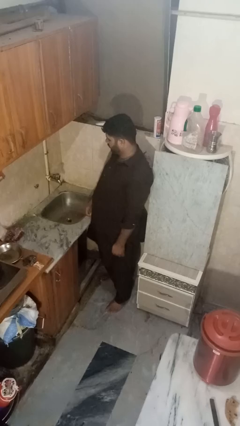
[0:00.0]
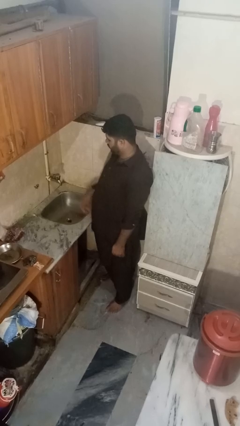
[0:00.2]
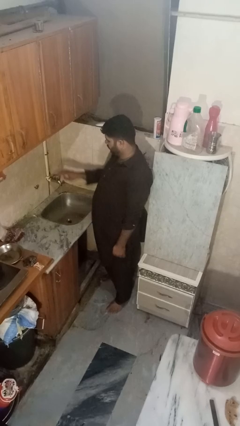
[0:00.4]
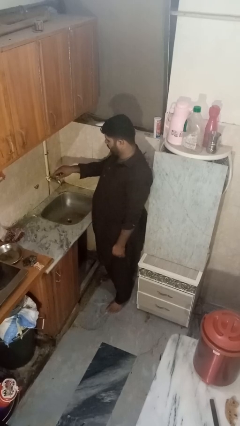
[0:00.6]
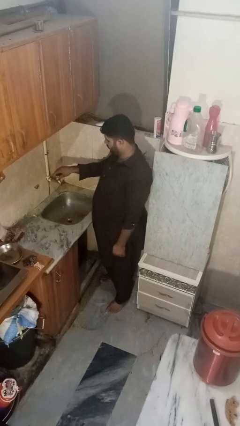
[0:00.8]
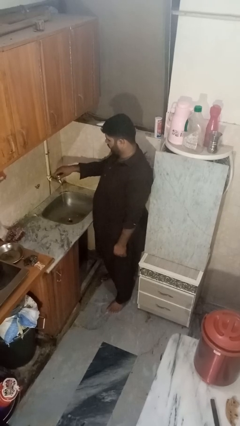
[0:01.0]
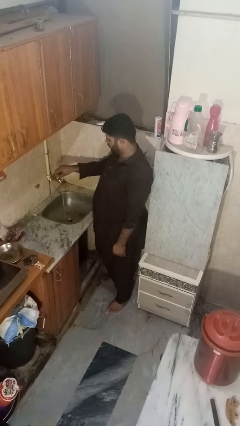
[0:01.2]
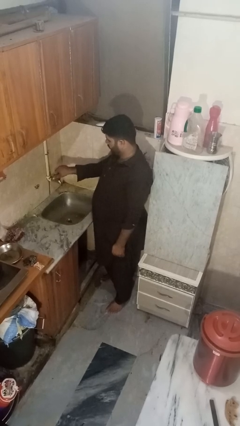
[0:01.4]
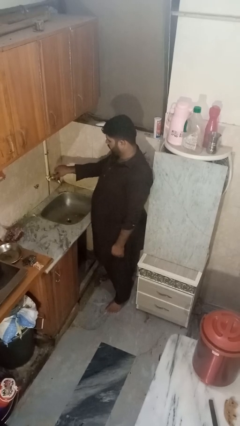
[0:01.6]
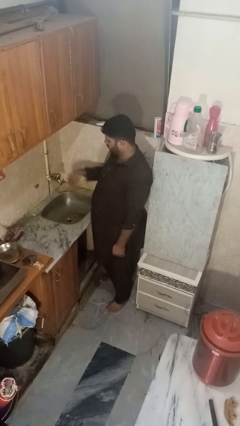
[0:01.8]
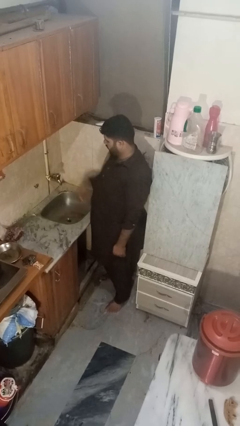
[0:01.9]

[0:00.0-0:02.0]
person turns off faucet

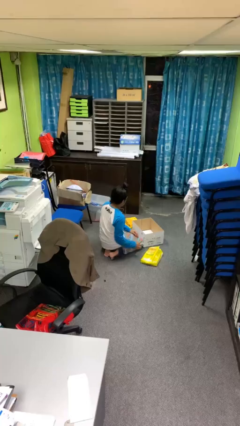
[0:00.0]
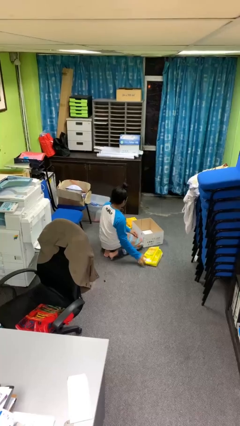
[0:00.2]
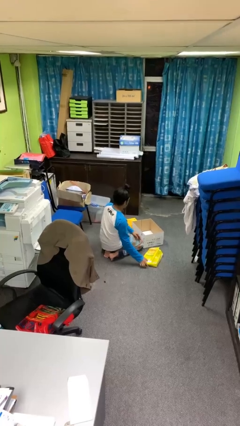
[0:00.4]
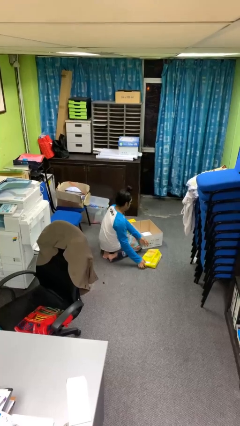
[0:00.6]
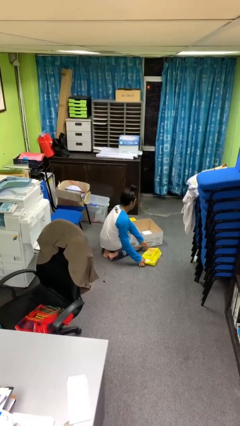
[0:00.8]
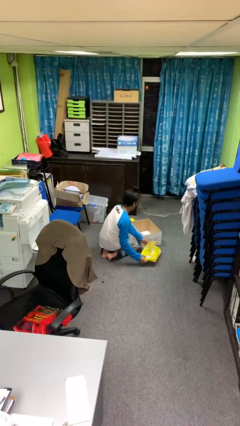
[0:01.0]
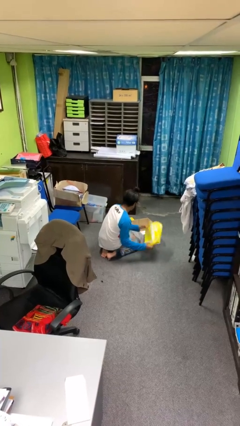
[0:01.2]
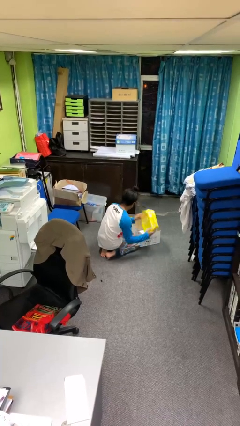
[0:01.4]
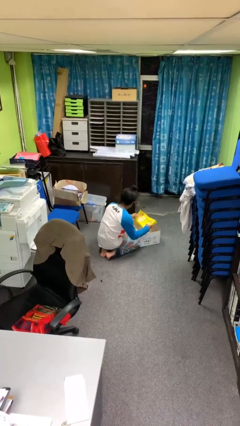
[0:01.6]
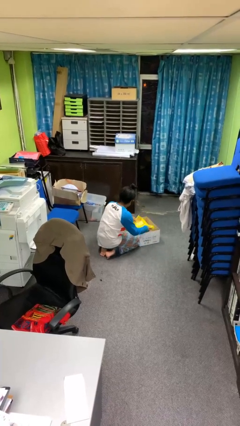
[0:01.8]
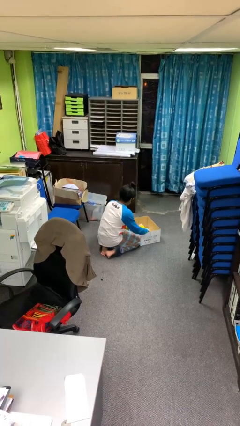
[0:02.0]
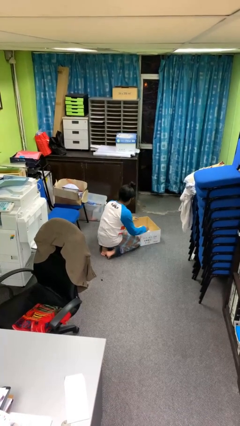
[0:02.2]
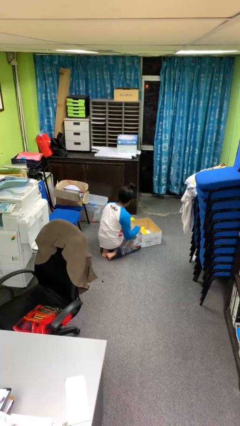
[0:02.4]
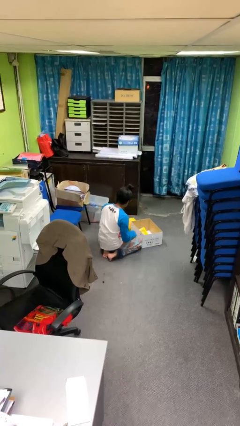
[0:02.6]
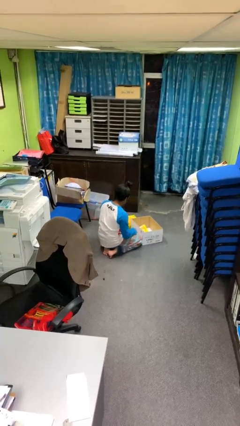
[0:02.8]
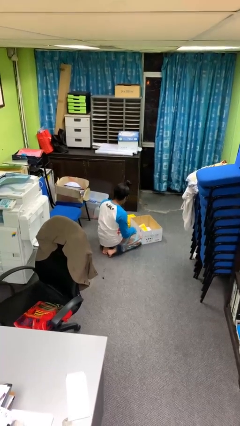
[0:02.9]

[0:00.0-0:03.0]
person puts object into box

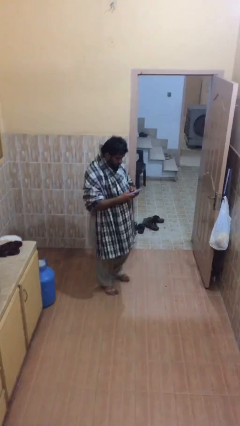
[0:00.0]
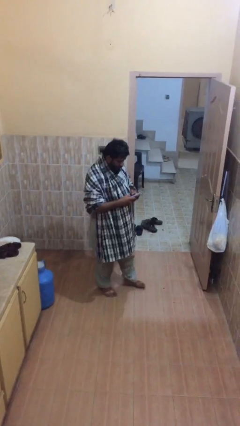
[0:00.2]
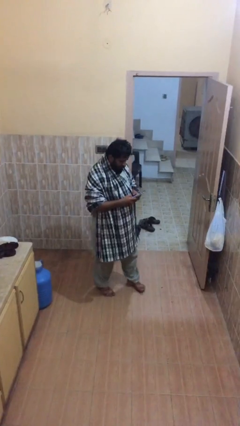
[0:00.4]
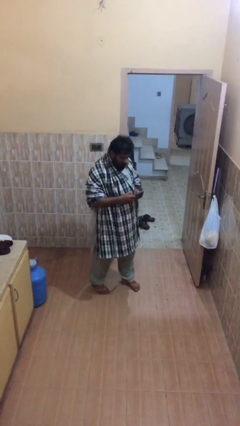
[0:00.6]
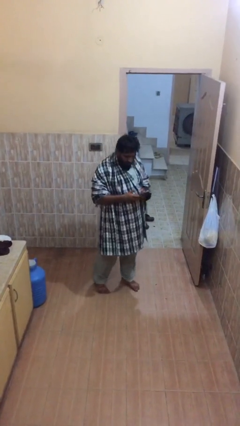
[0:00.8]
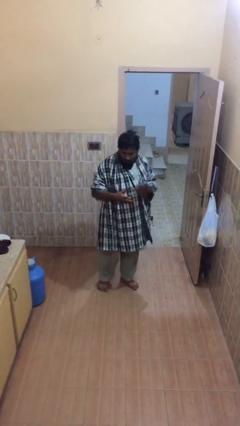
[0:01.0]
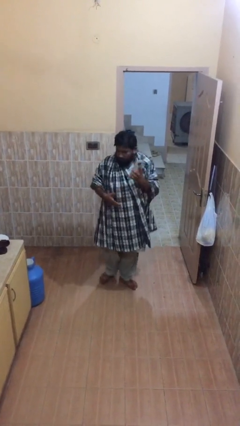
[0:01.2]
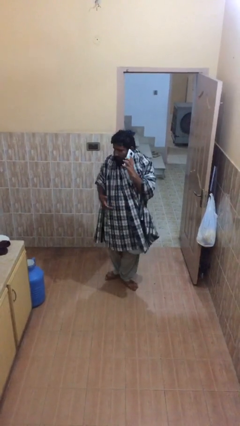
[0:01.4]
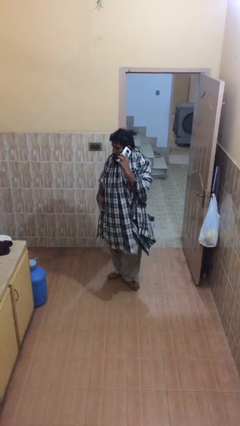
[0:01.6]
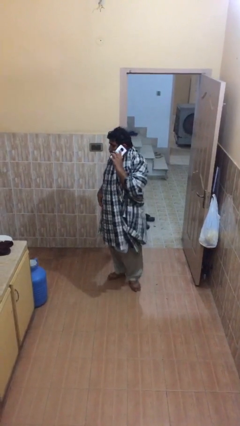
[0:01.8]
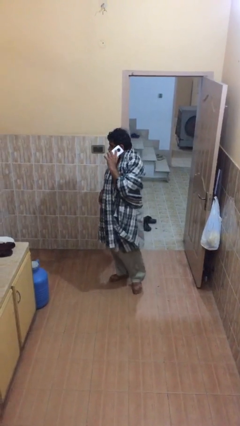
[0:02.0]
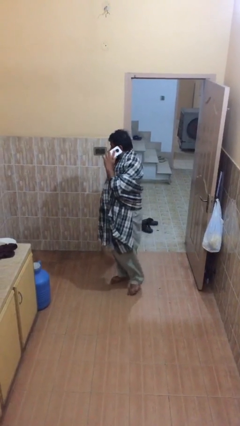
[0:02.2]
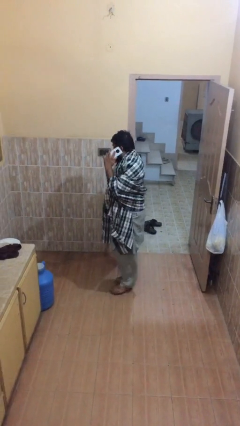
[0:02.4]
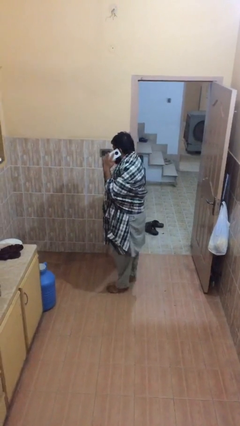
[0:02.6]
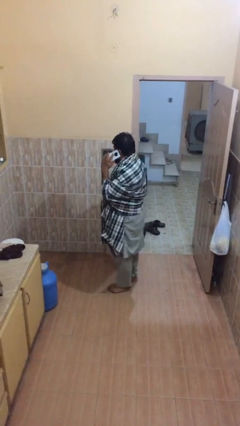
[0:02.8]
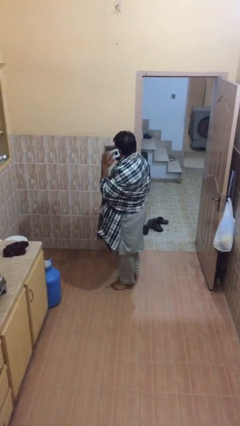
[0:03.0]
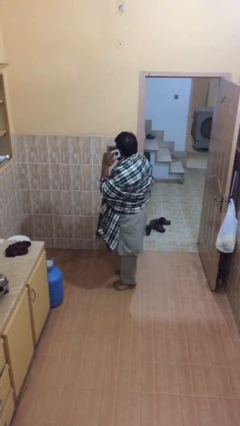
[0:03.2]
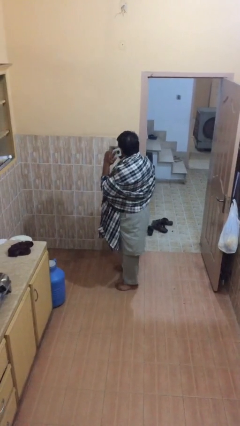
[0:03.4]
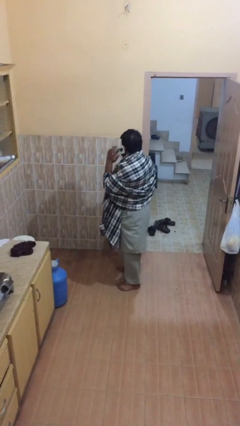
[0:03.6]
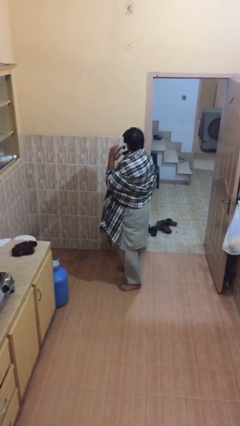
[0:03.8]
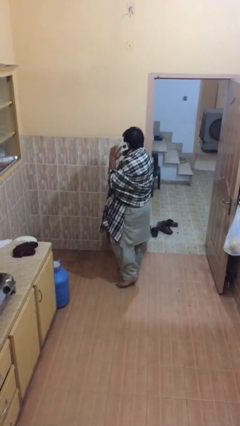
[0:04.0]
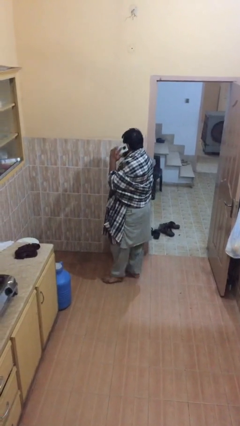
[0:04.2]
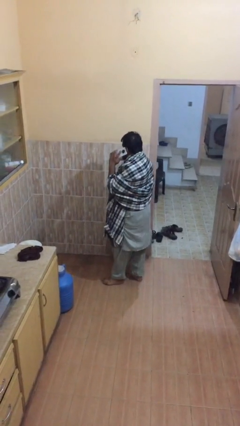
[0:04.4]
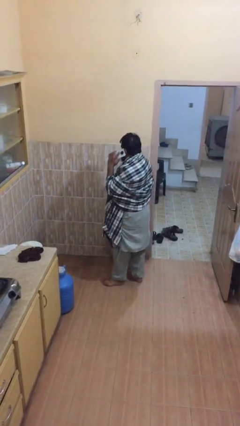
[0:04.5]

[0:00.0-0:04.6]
person talks on phone

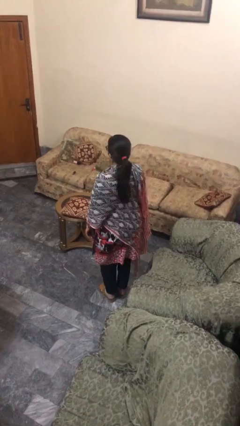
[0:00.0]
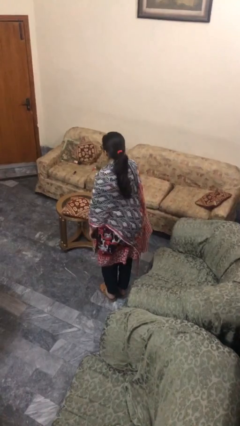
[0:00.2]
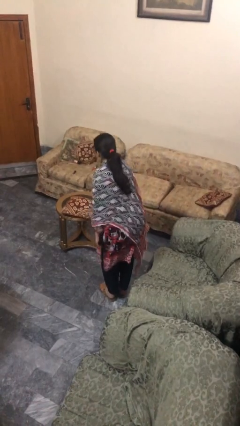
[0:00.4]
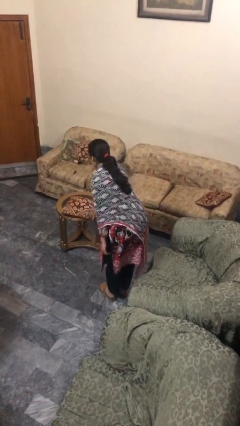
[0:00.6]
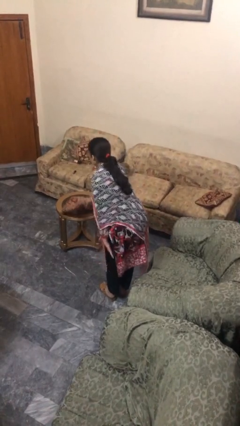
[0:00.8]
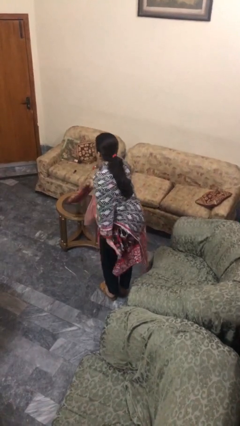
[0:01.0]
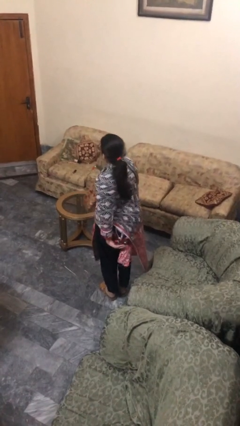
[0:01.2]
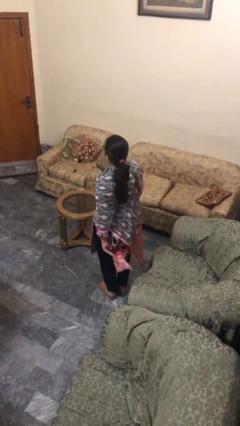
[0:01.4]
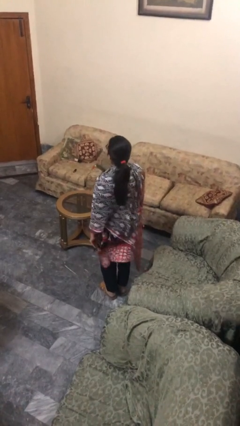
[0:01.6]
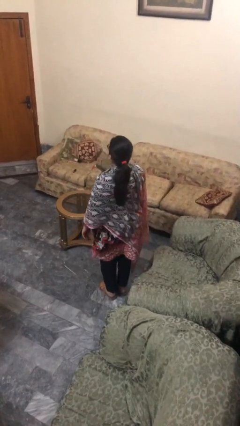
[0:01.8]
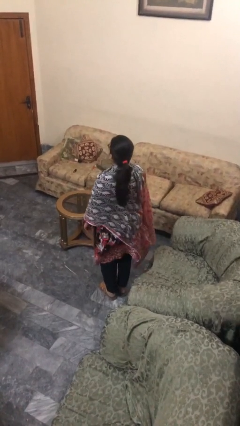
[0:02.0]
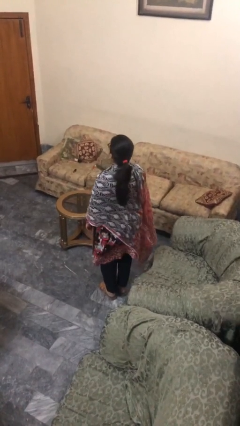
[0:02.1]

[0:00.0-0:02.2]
person picks up object from table

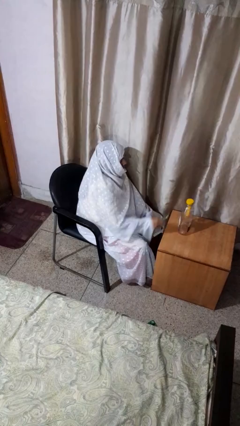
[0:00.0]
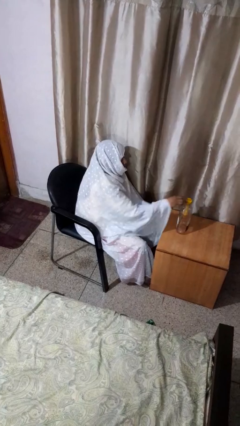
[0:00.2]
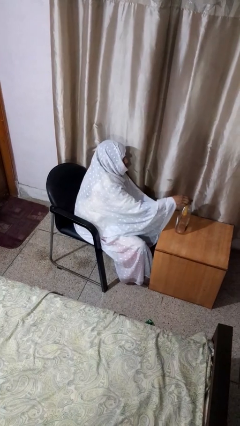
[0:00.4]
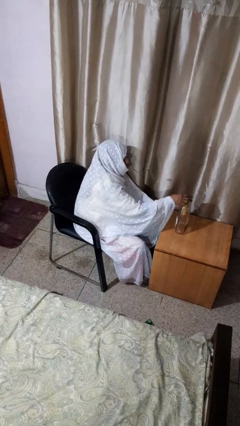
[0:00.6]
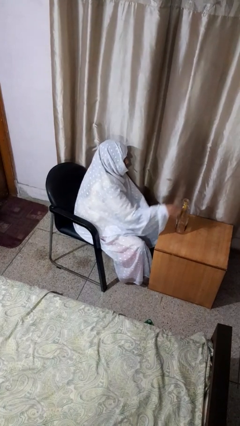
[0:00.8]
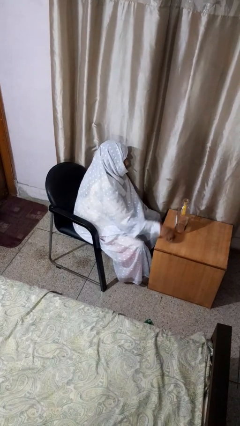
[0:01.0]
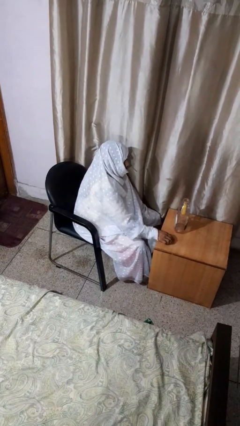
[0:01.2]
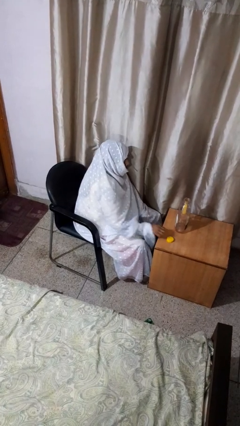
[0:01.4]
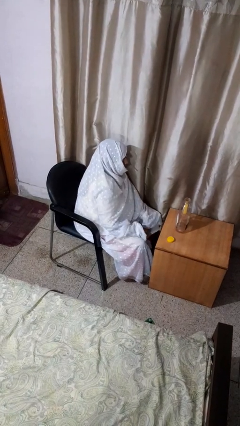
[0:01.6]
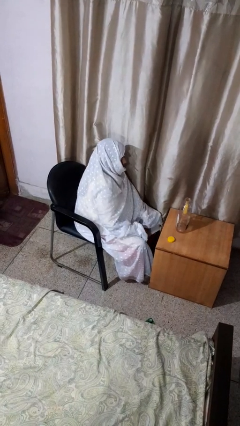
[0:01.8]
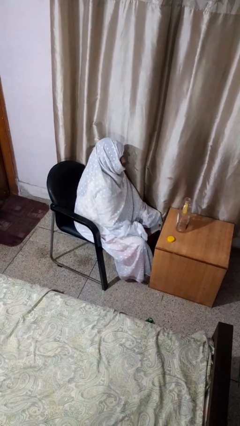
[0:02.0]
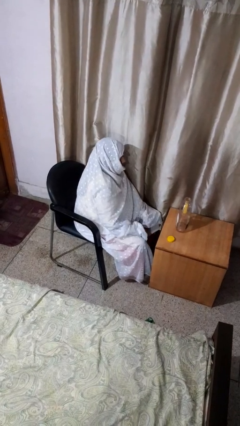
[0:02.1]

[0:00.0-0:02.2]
person unscrews lid from bottle

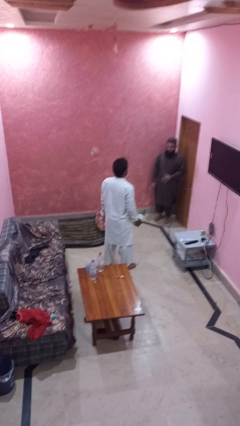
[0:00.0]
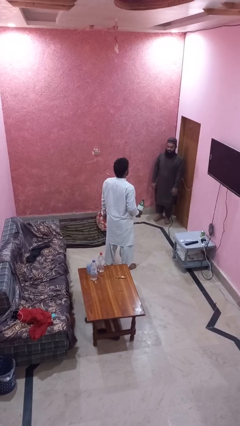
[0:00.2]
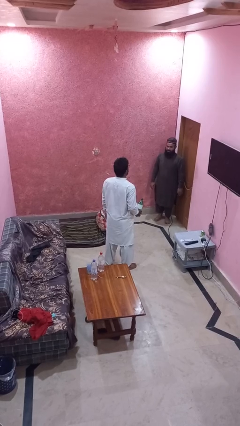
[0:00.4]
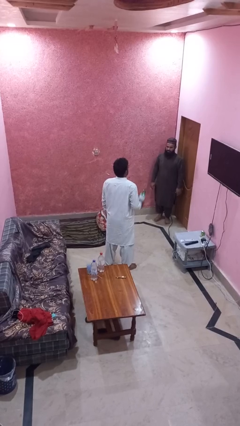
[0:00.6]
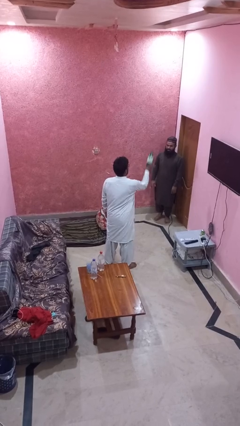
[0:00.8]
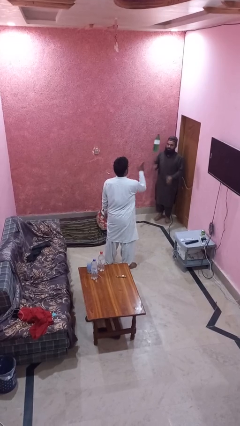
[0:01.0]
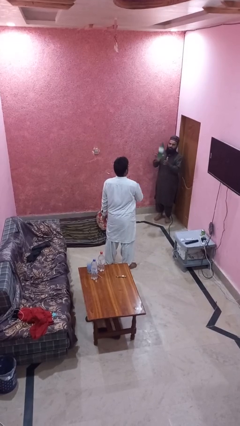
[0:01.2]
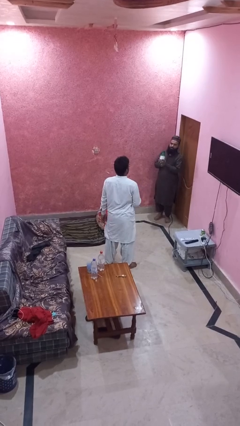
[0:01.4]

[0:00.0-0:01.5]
person throws object to person

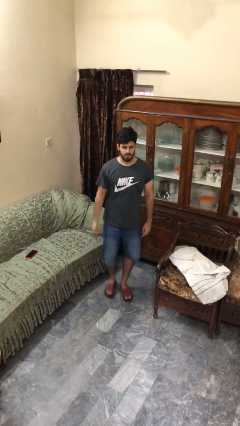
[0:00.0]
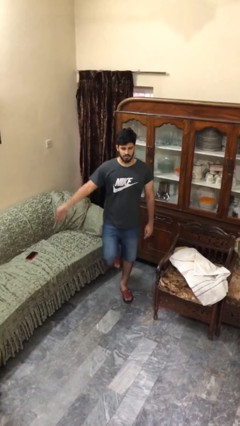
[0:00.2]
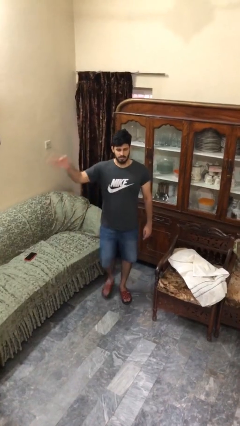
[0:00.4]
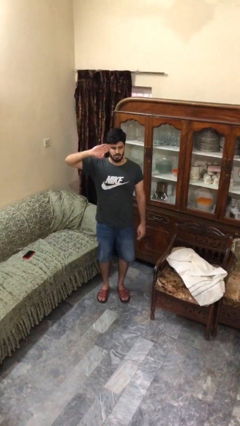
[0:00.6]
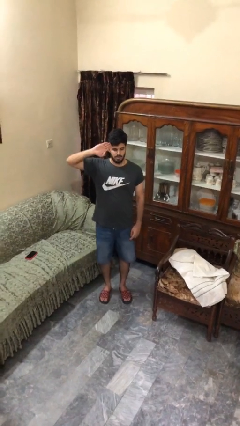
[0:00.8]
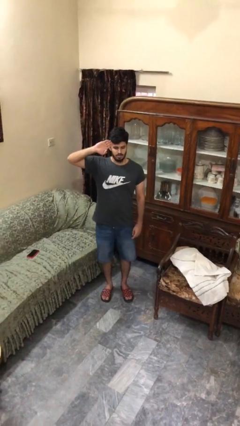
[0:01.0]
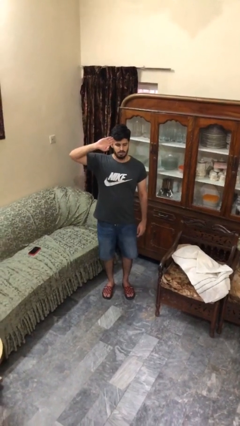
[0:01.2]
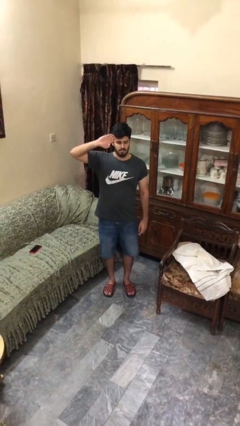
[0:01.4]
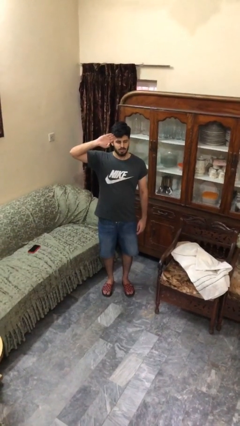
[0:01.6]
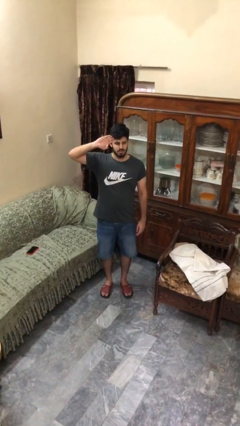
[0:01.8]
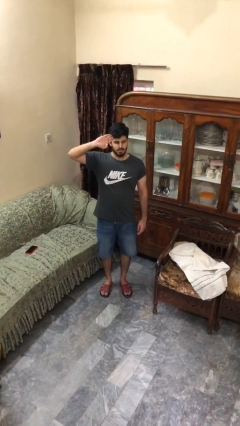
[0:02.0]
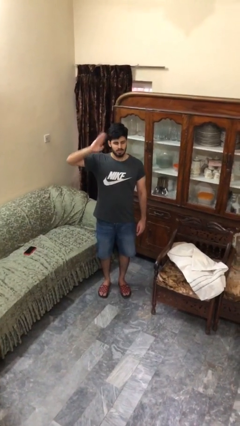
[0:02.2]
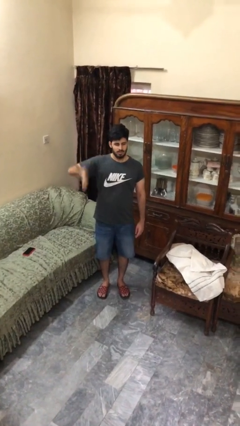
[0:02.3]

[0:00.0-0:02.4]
person salutes
